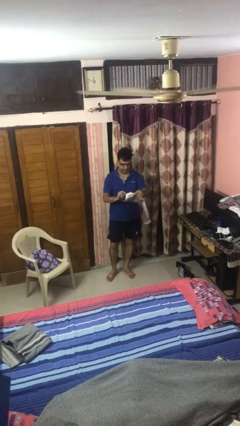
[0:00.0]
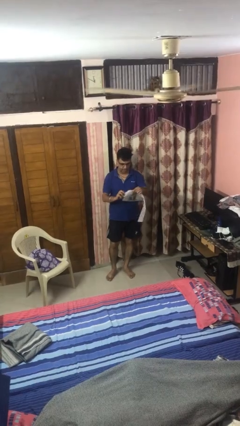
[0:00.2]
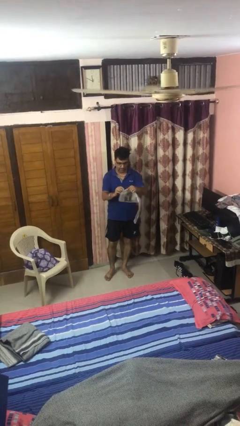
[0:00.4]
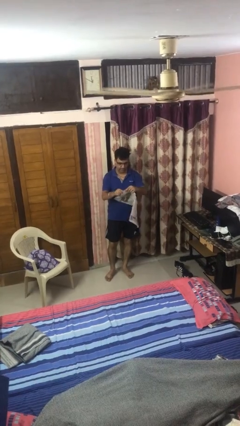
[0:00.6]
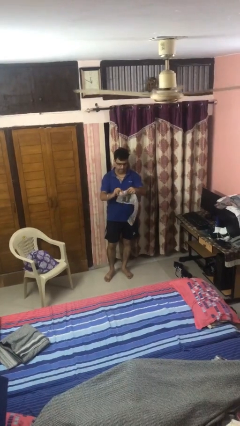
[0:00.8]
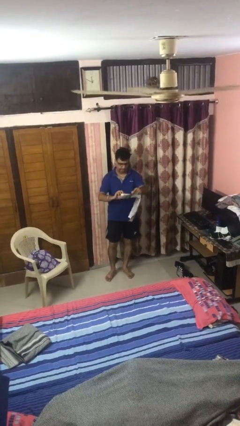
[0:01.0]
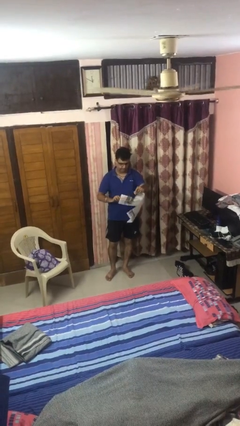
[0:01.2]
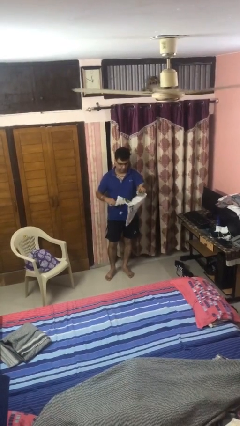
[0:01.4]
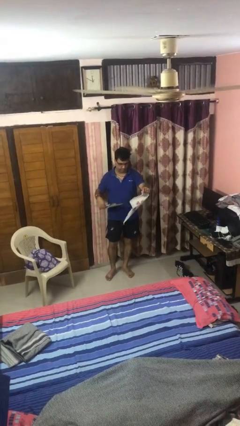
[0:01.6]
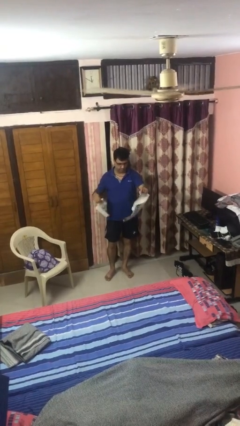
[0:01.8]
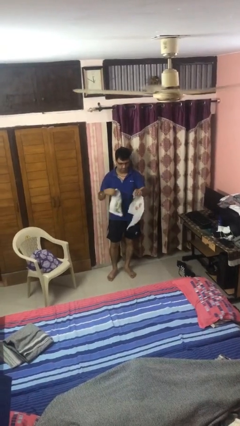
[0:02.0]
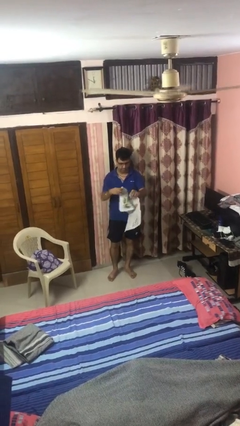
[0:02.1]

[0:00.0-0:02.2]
person tears paper

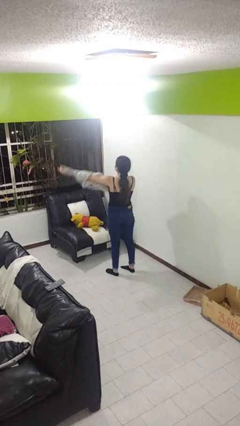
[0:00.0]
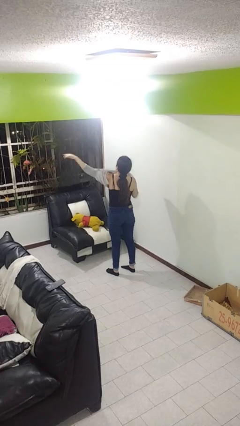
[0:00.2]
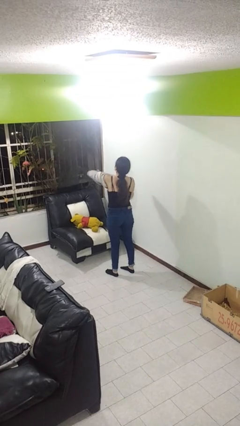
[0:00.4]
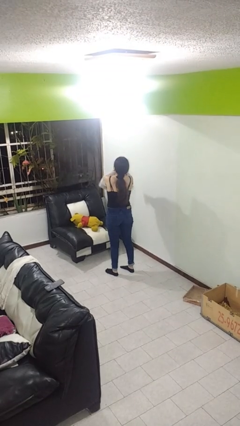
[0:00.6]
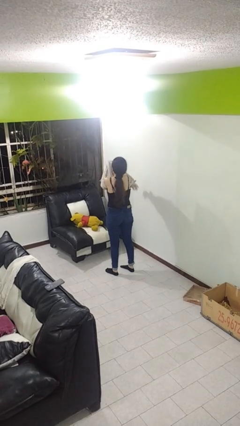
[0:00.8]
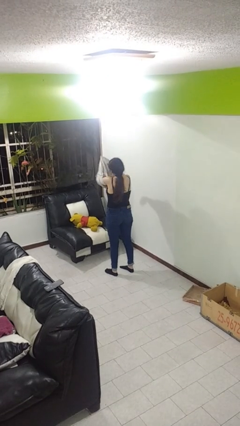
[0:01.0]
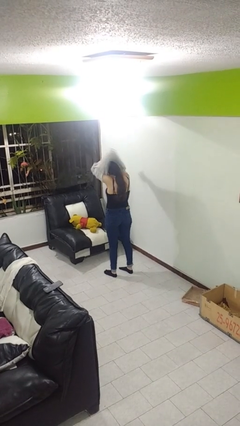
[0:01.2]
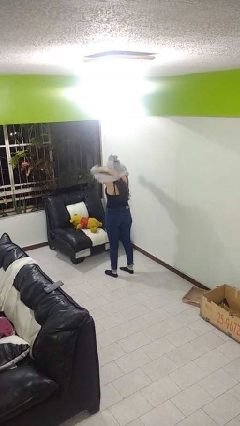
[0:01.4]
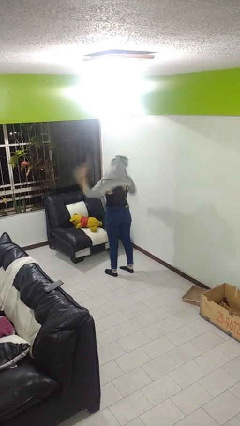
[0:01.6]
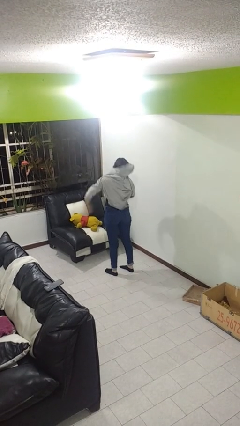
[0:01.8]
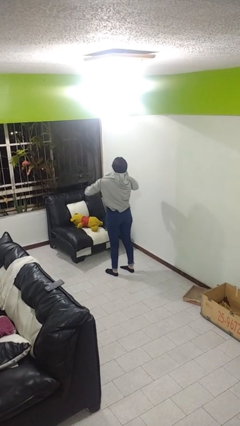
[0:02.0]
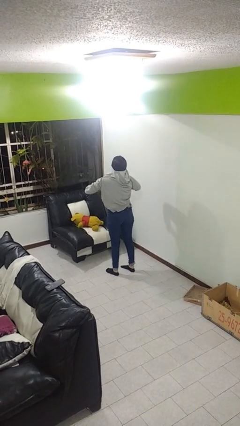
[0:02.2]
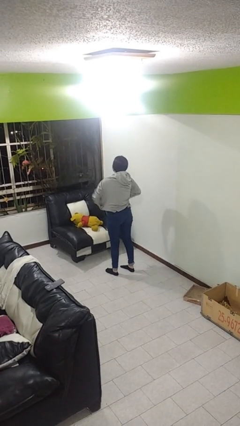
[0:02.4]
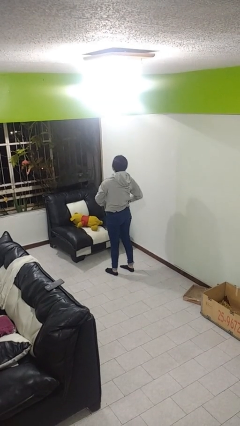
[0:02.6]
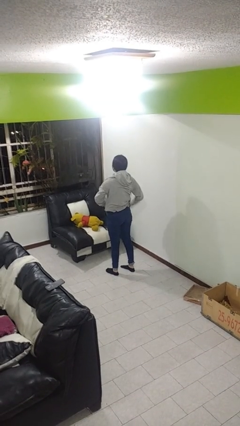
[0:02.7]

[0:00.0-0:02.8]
person puts on hoodie

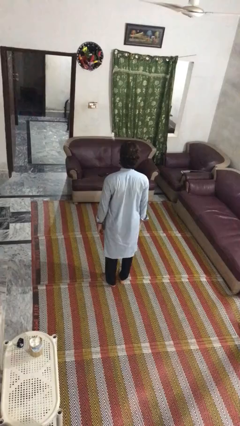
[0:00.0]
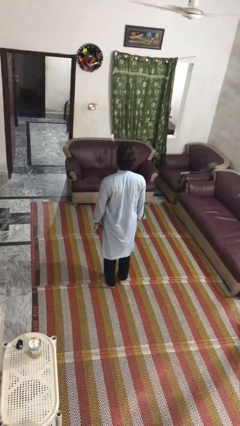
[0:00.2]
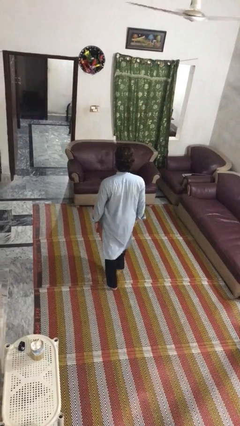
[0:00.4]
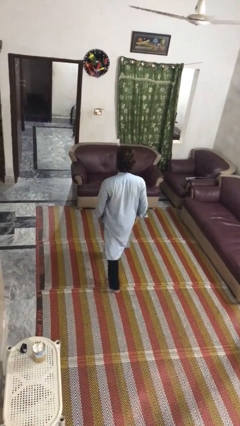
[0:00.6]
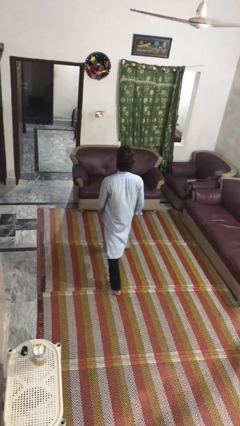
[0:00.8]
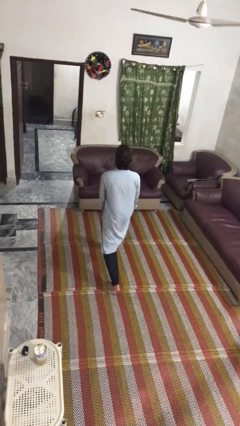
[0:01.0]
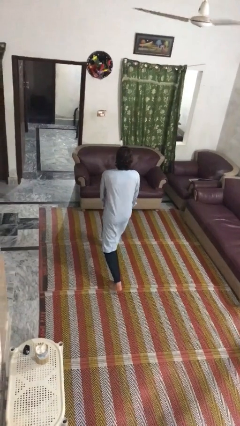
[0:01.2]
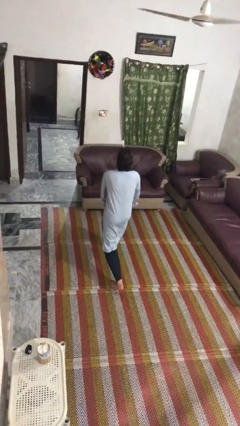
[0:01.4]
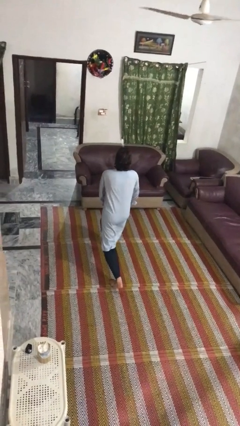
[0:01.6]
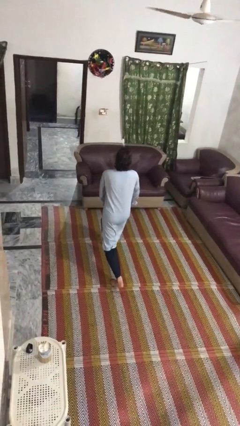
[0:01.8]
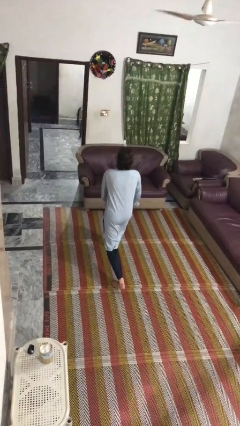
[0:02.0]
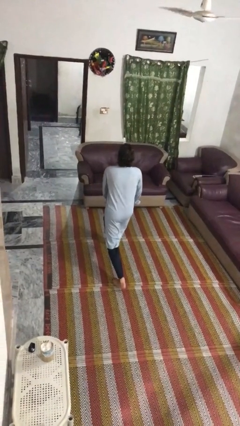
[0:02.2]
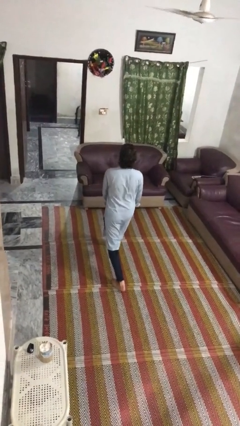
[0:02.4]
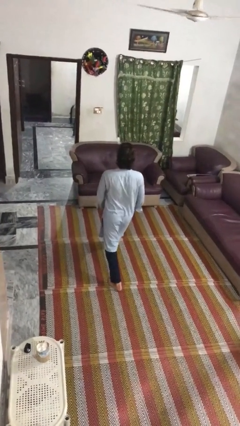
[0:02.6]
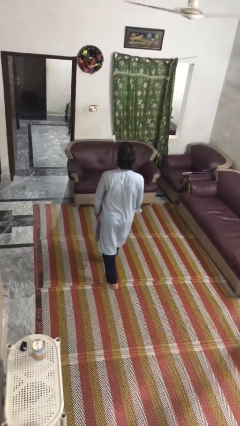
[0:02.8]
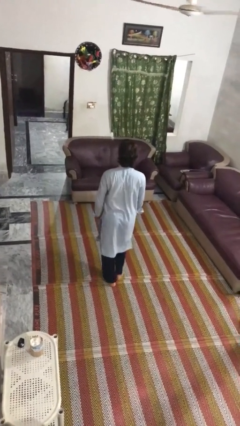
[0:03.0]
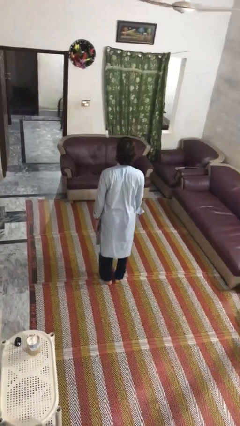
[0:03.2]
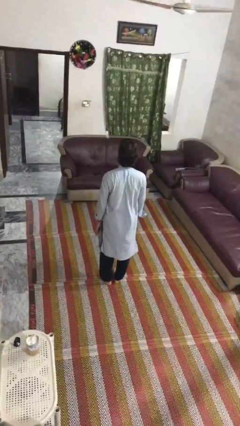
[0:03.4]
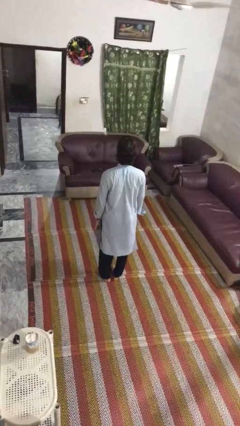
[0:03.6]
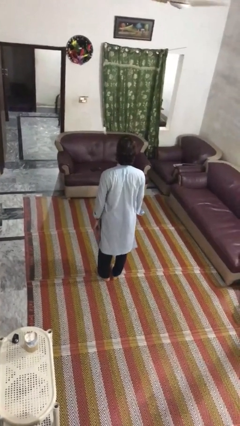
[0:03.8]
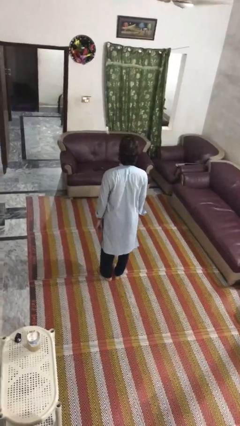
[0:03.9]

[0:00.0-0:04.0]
person exercises with lunges

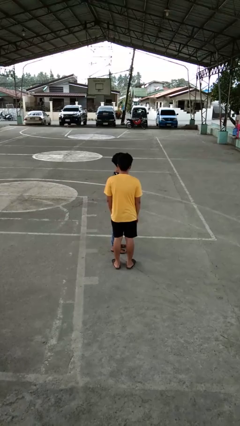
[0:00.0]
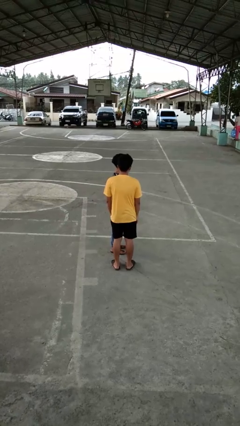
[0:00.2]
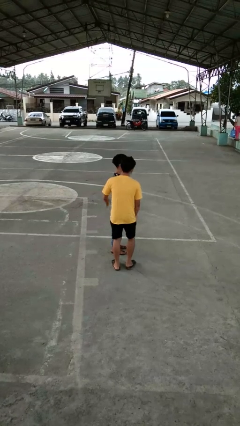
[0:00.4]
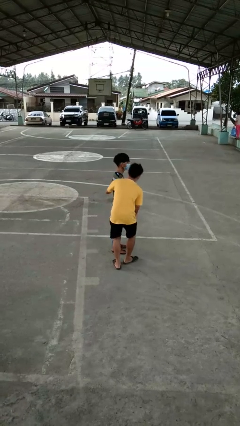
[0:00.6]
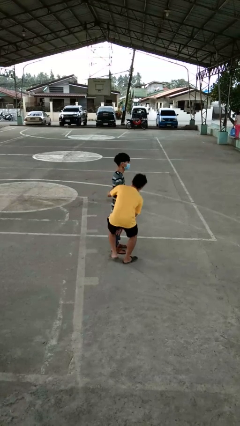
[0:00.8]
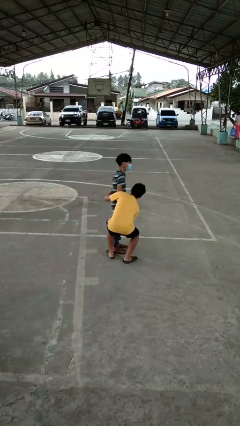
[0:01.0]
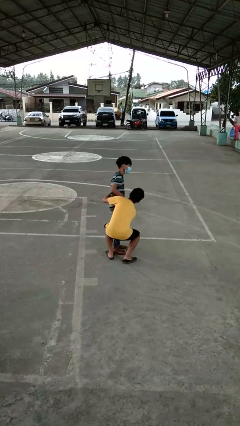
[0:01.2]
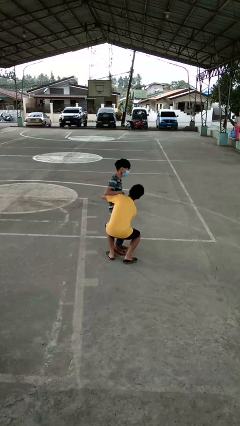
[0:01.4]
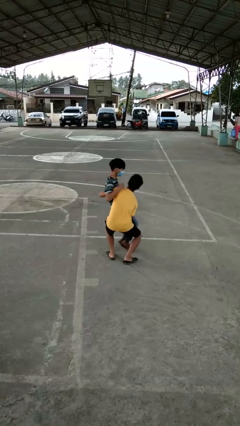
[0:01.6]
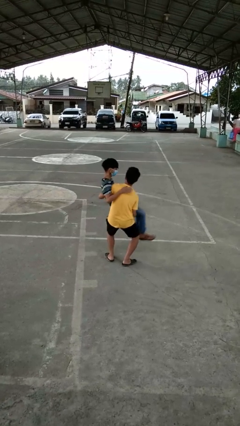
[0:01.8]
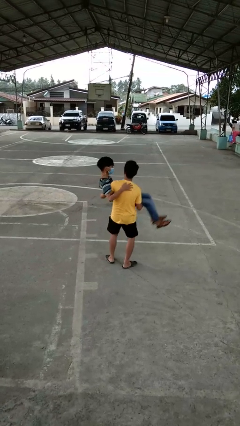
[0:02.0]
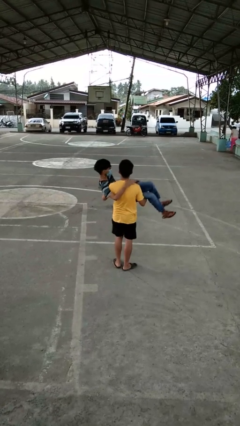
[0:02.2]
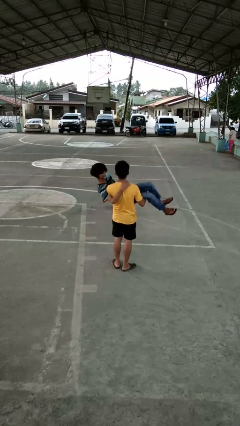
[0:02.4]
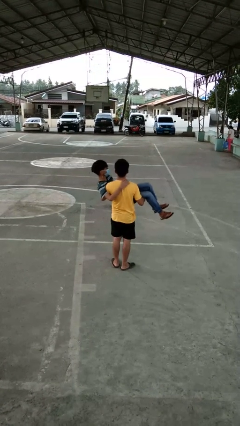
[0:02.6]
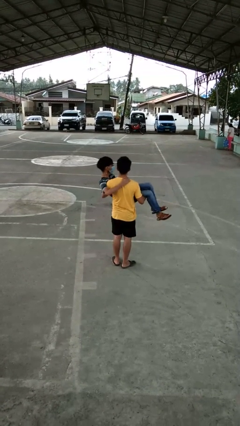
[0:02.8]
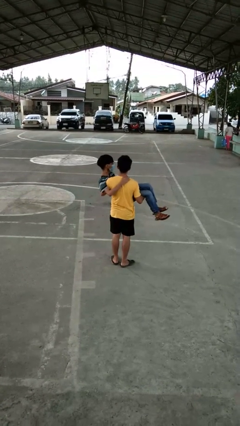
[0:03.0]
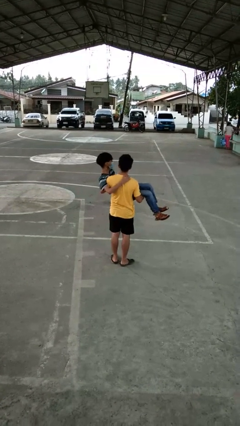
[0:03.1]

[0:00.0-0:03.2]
person picks up person

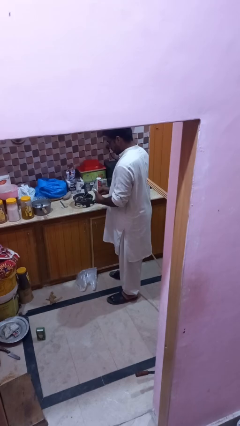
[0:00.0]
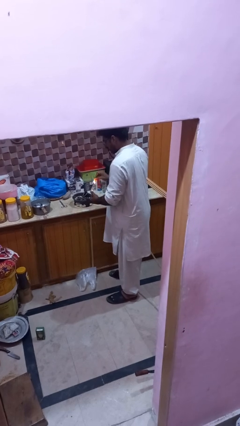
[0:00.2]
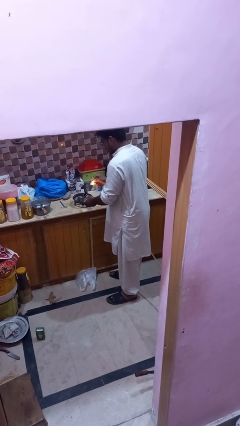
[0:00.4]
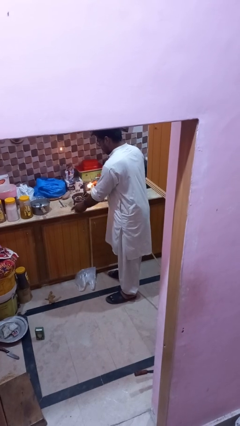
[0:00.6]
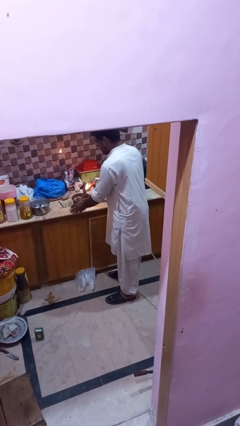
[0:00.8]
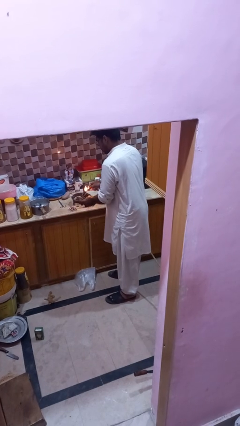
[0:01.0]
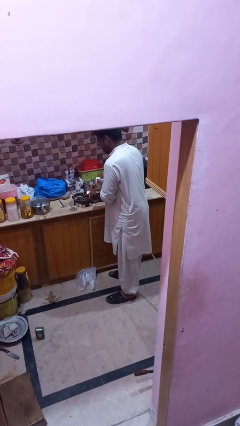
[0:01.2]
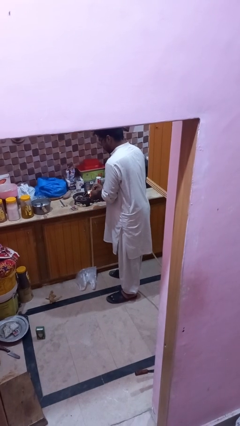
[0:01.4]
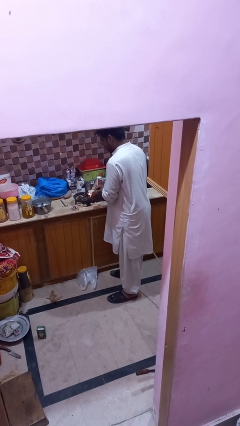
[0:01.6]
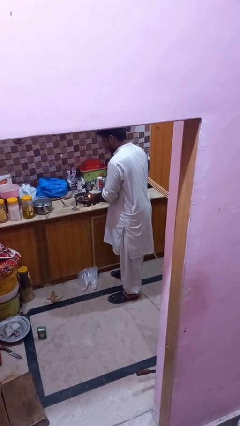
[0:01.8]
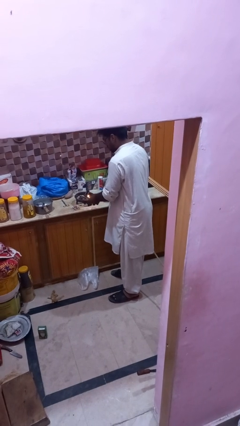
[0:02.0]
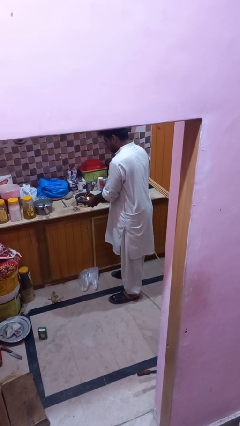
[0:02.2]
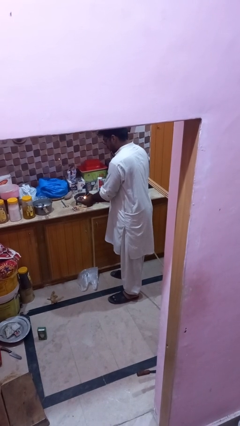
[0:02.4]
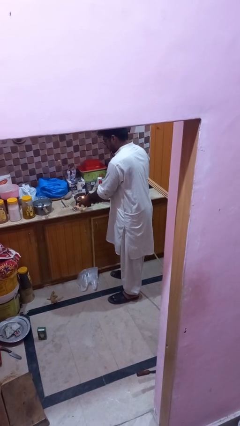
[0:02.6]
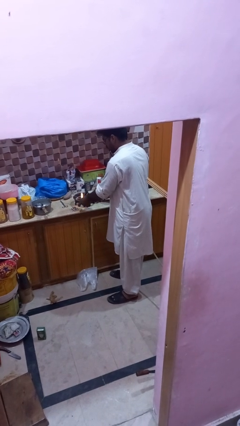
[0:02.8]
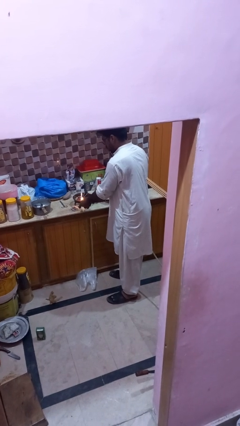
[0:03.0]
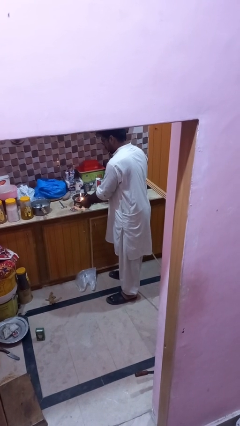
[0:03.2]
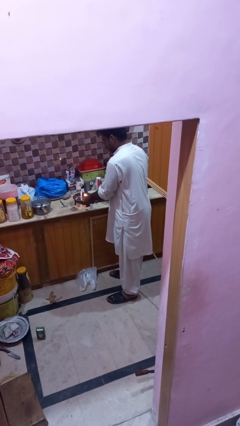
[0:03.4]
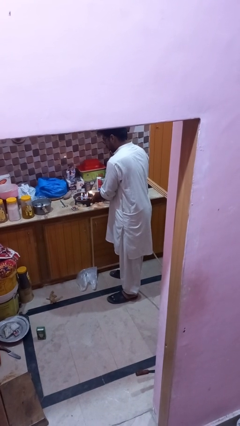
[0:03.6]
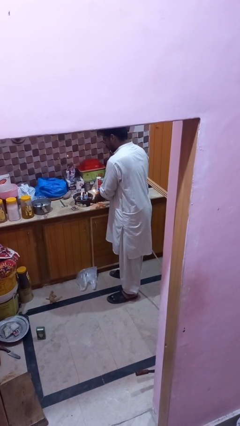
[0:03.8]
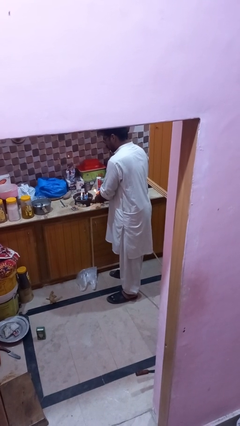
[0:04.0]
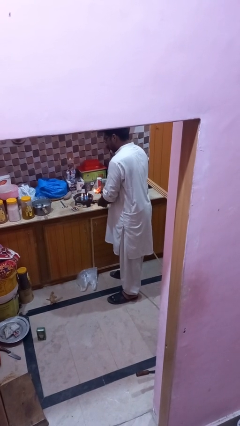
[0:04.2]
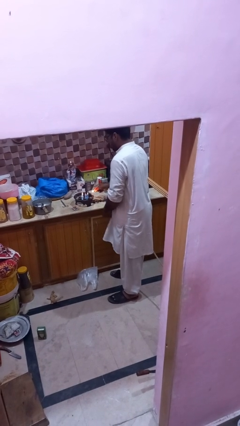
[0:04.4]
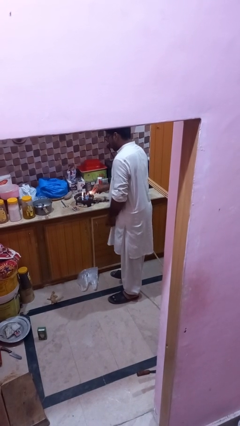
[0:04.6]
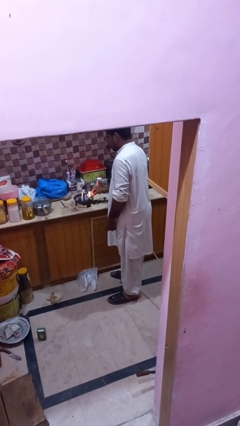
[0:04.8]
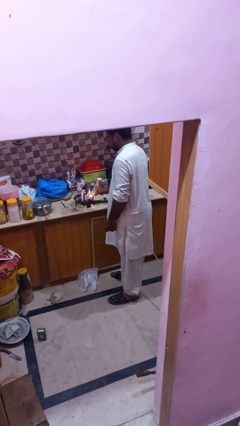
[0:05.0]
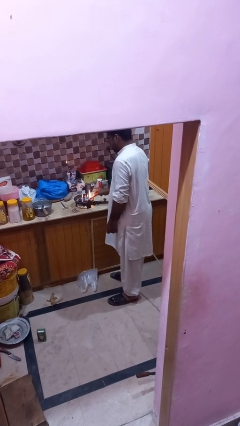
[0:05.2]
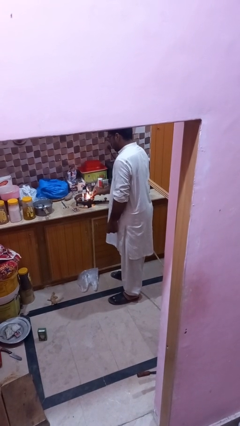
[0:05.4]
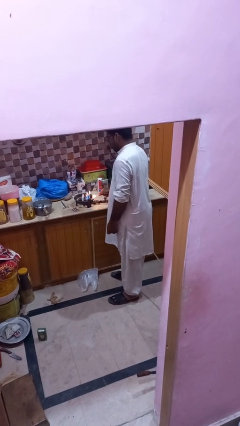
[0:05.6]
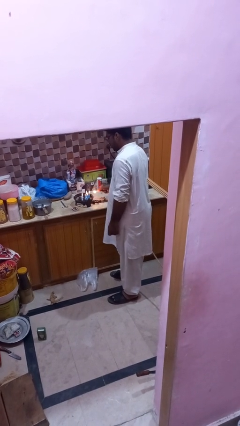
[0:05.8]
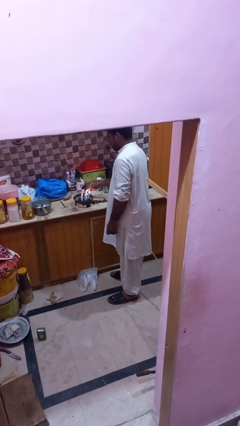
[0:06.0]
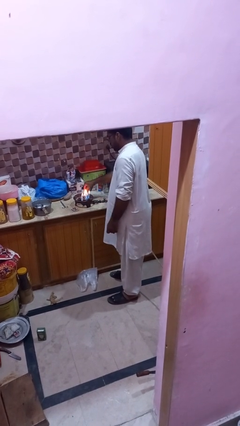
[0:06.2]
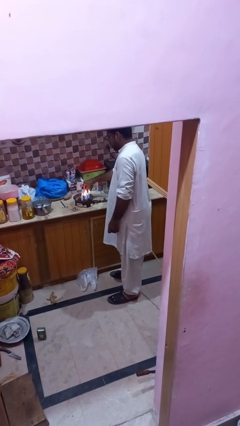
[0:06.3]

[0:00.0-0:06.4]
person turns on stovetop
